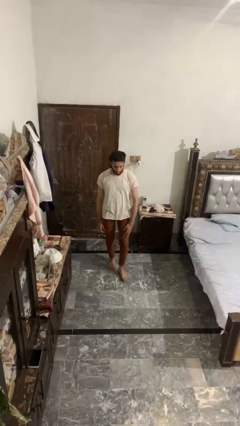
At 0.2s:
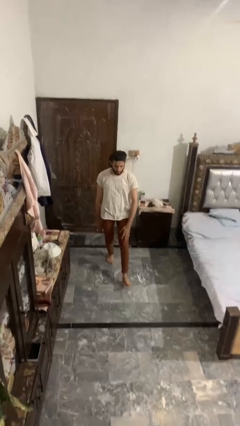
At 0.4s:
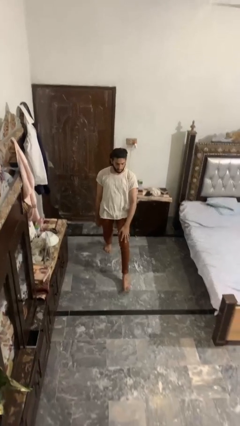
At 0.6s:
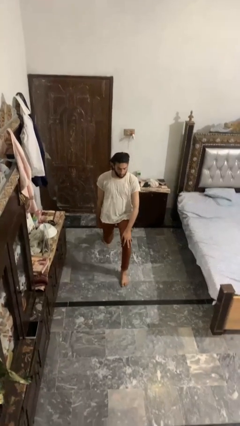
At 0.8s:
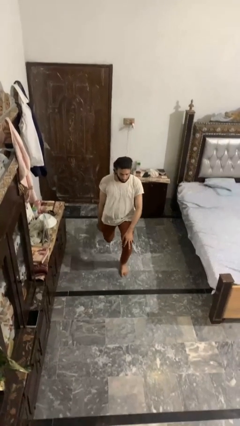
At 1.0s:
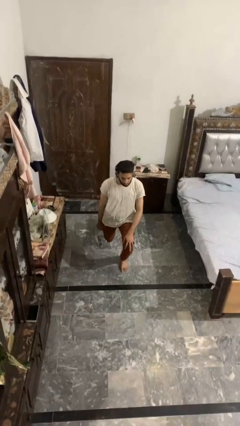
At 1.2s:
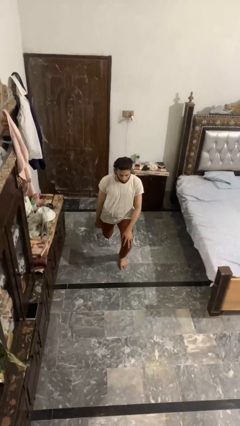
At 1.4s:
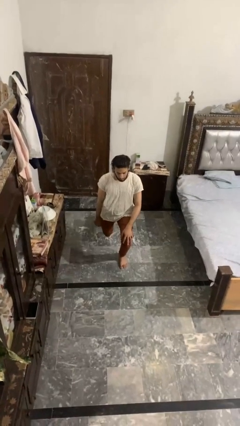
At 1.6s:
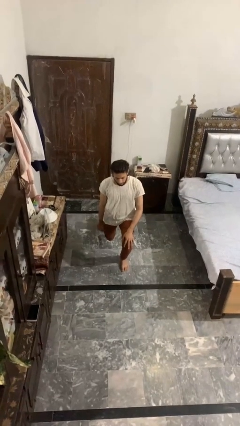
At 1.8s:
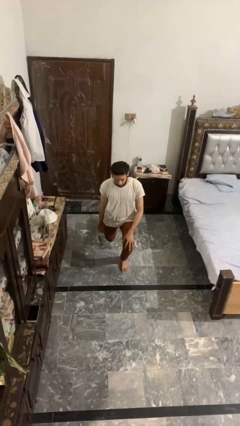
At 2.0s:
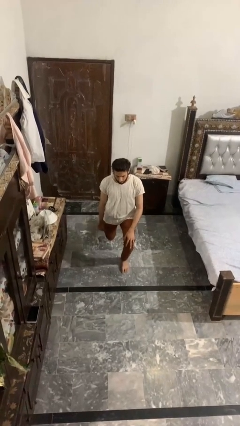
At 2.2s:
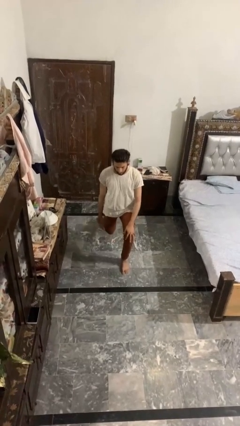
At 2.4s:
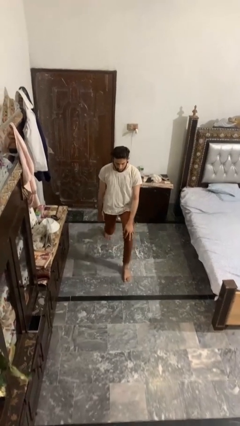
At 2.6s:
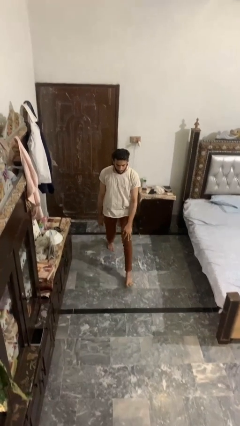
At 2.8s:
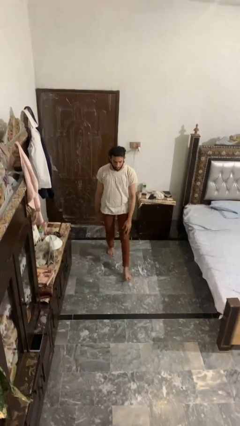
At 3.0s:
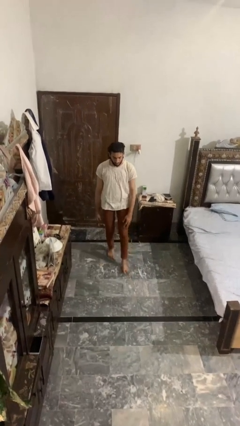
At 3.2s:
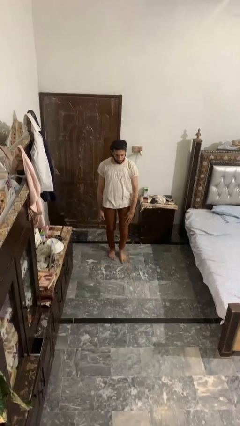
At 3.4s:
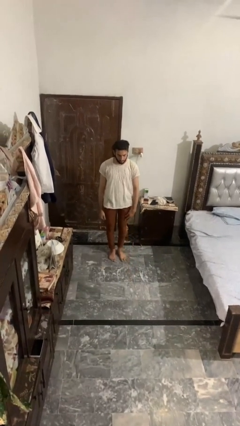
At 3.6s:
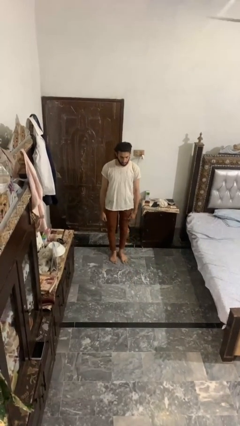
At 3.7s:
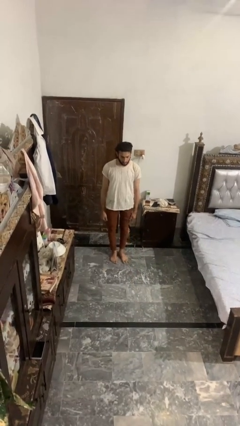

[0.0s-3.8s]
person exercises with lunges

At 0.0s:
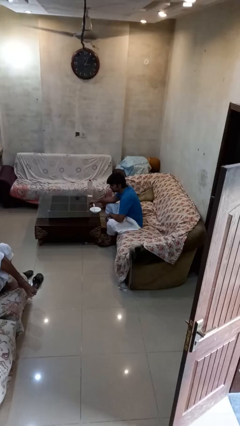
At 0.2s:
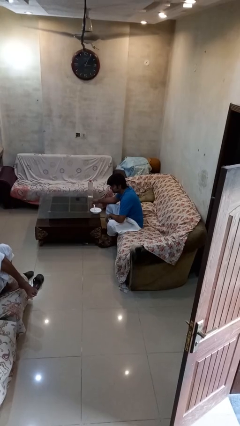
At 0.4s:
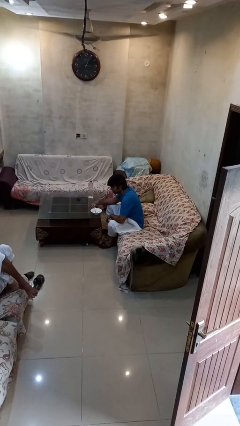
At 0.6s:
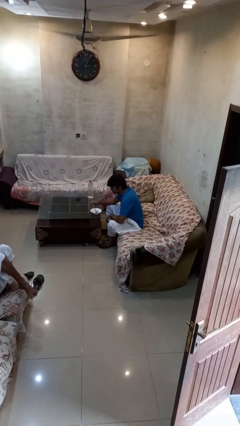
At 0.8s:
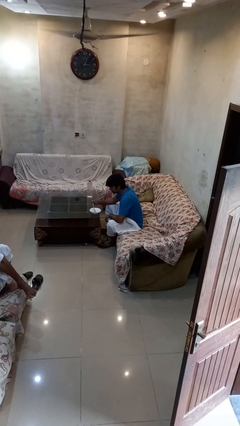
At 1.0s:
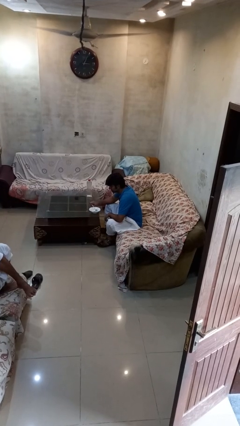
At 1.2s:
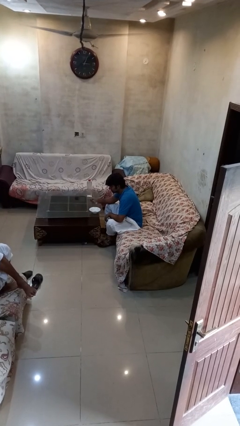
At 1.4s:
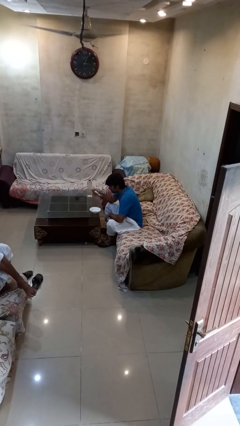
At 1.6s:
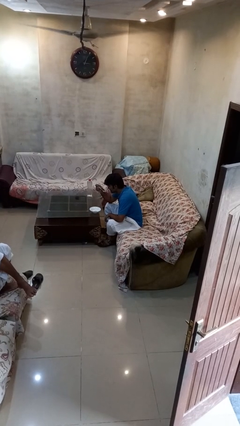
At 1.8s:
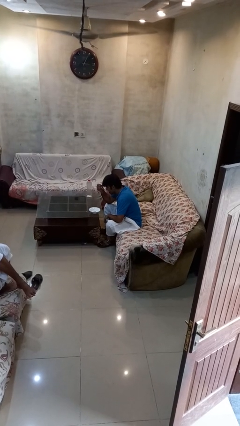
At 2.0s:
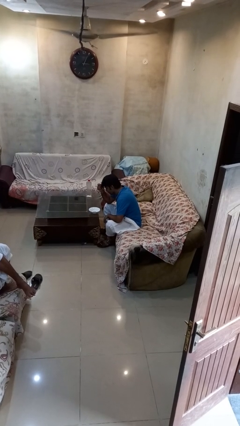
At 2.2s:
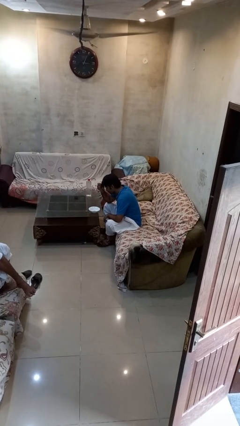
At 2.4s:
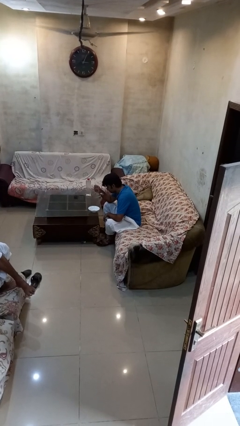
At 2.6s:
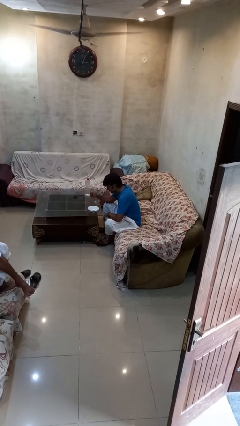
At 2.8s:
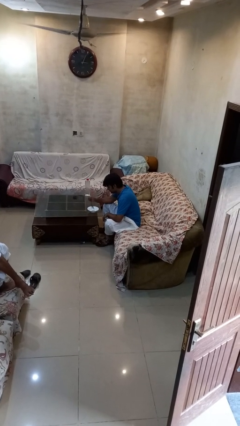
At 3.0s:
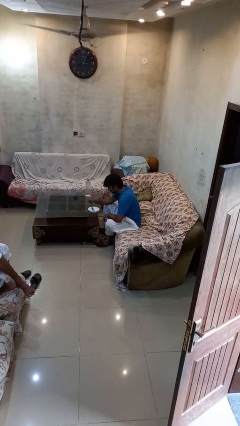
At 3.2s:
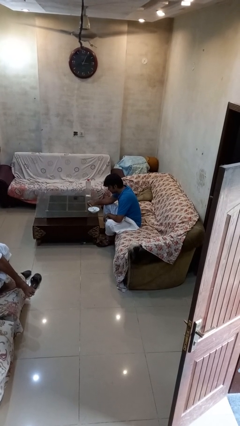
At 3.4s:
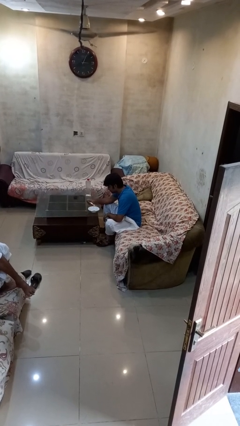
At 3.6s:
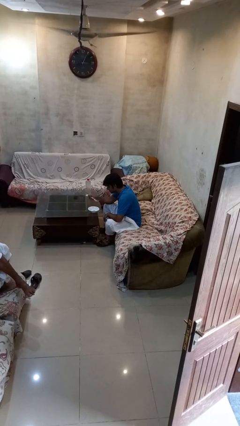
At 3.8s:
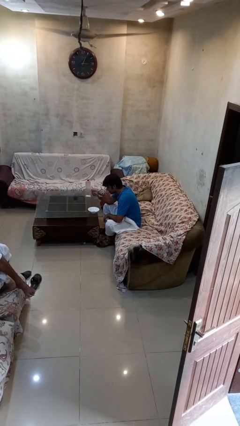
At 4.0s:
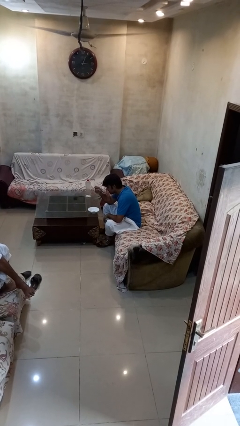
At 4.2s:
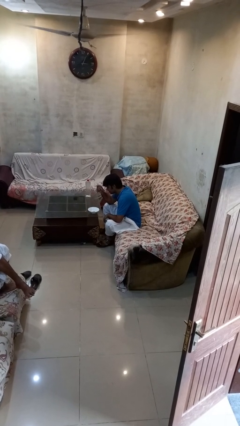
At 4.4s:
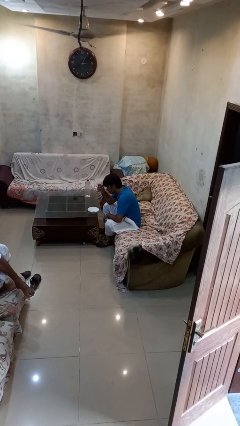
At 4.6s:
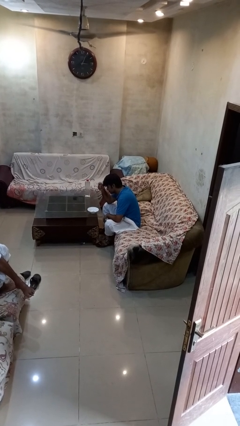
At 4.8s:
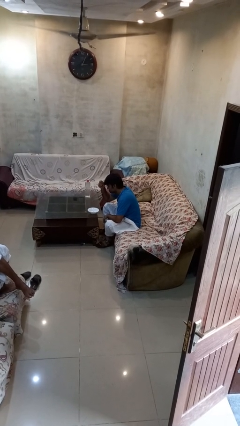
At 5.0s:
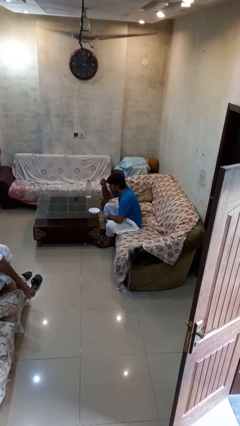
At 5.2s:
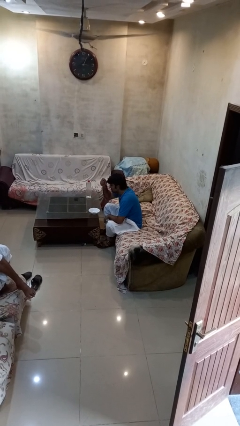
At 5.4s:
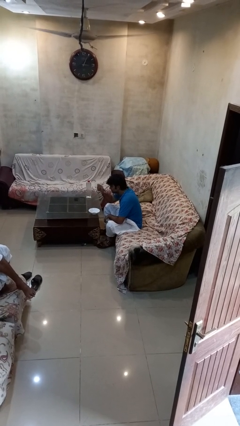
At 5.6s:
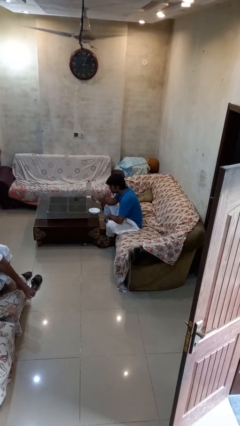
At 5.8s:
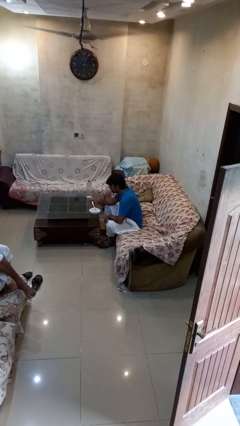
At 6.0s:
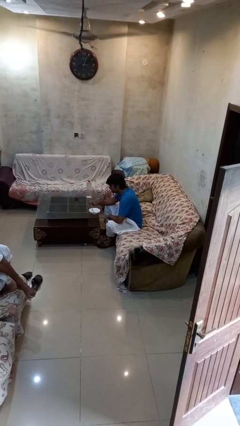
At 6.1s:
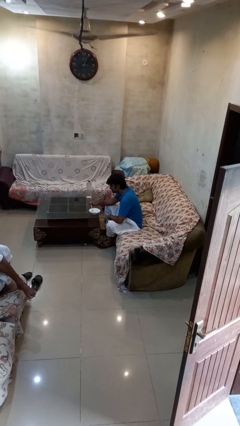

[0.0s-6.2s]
person eats with utensil

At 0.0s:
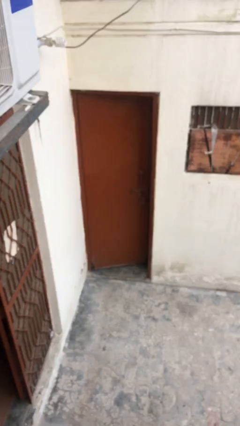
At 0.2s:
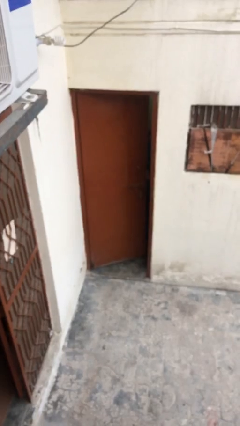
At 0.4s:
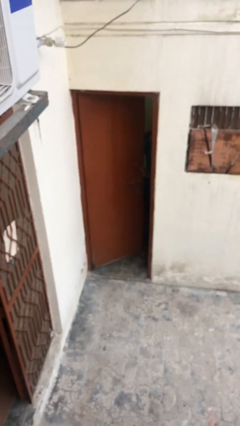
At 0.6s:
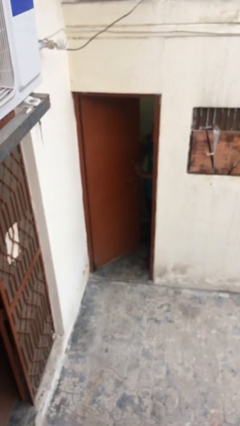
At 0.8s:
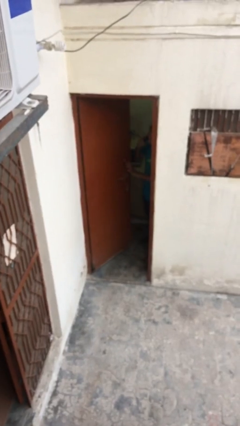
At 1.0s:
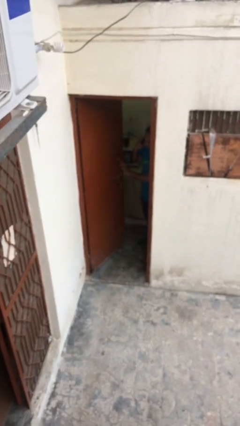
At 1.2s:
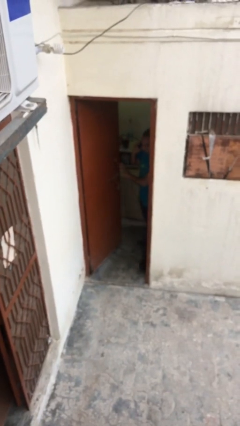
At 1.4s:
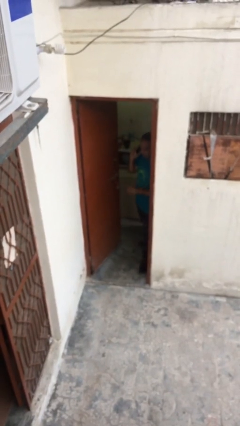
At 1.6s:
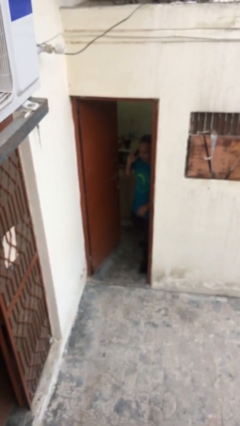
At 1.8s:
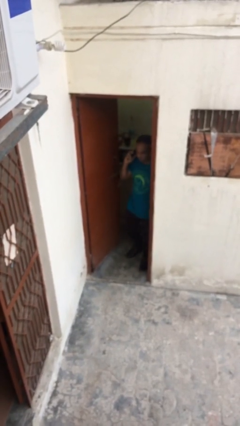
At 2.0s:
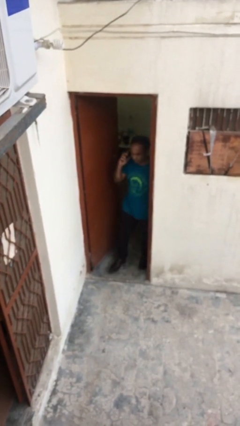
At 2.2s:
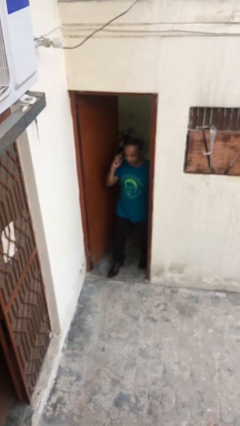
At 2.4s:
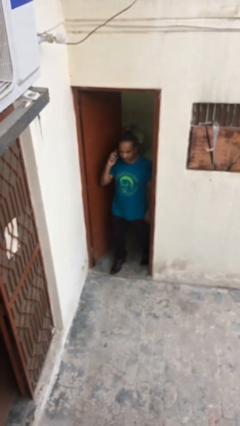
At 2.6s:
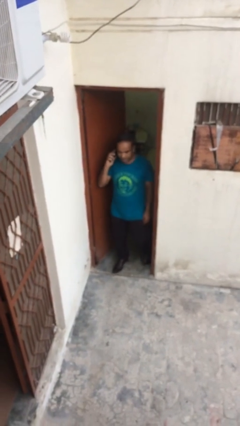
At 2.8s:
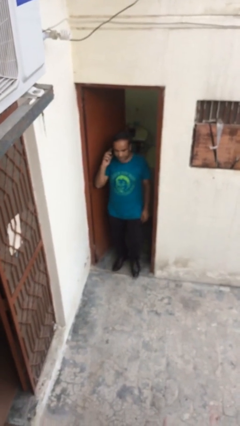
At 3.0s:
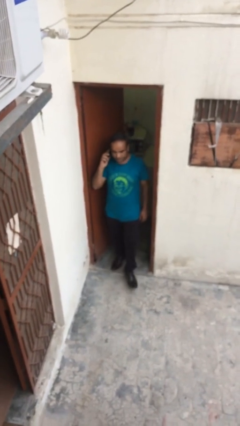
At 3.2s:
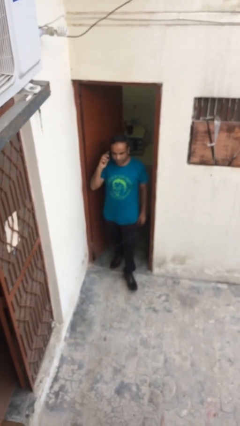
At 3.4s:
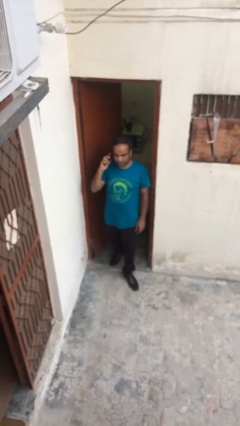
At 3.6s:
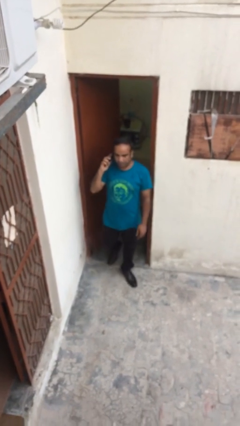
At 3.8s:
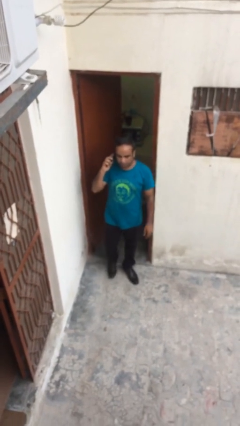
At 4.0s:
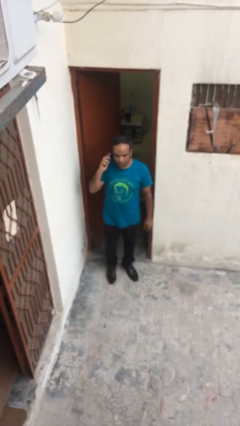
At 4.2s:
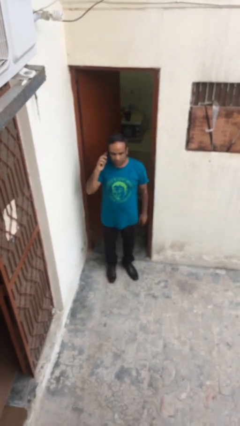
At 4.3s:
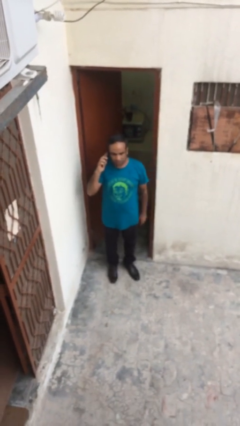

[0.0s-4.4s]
person enters scene through structure

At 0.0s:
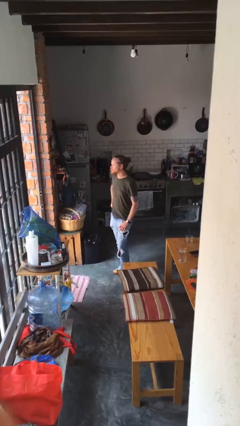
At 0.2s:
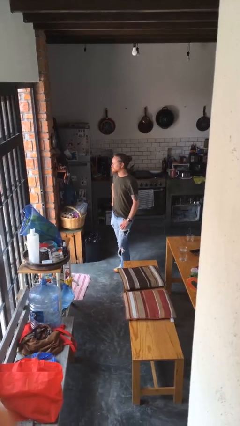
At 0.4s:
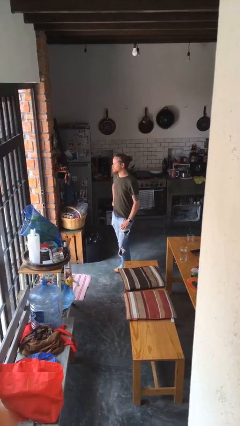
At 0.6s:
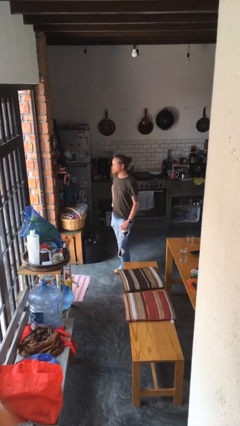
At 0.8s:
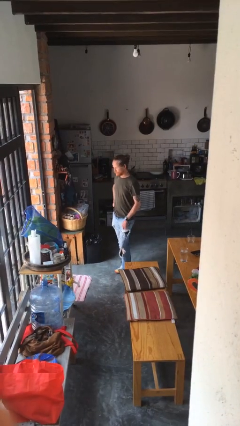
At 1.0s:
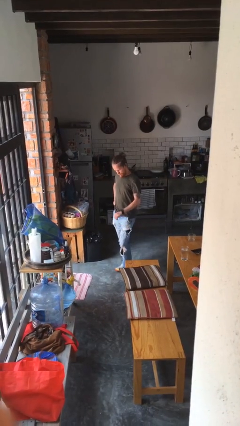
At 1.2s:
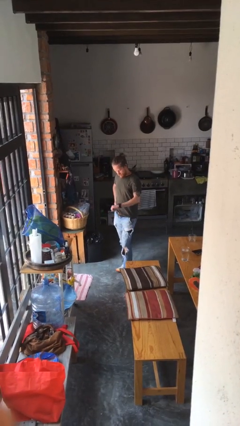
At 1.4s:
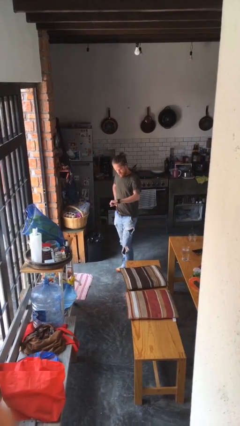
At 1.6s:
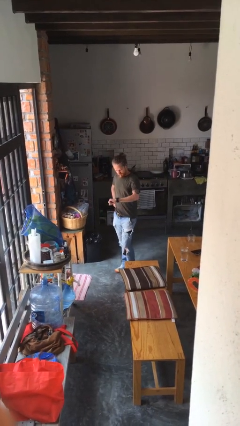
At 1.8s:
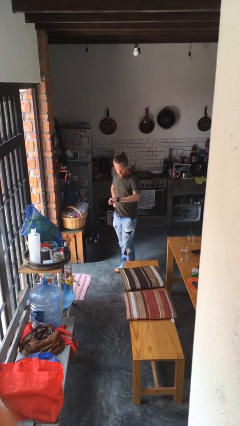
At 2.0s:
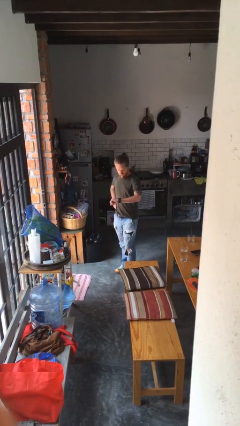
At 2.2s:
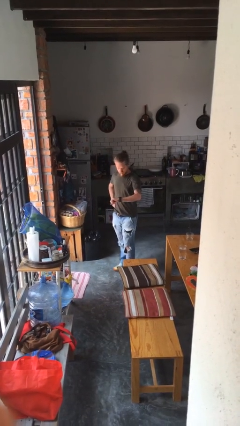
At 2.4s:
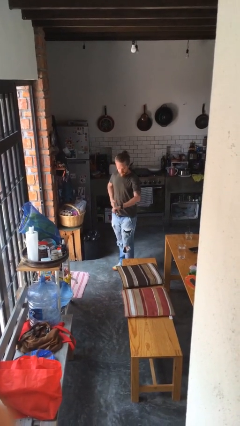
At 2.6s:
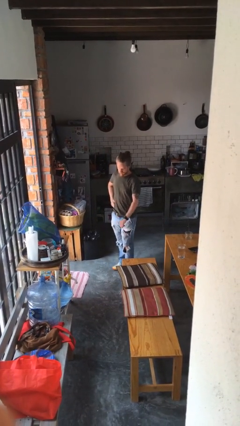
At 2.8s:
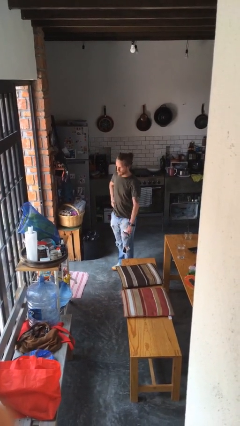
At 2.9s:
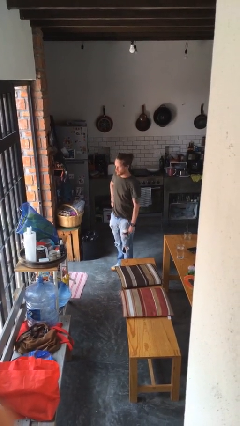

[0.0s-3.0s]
person looks at wristwatch

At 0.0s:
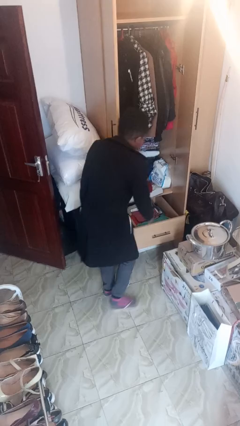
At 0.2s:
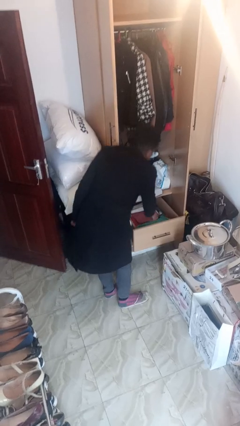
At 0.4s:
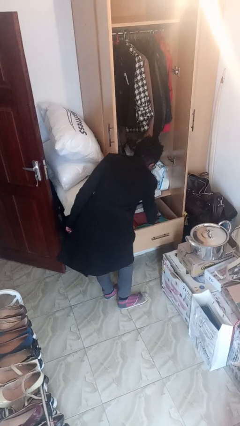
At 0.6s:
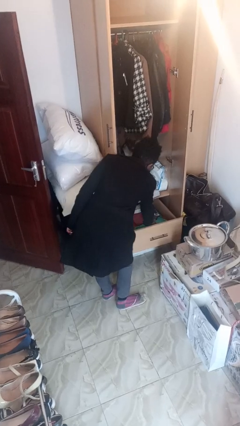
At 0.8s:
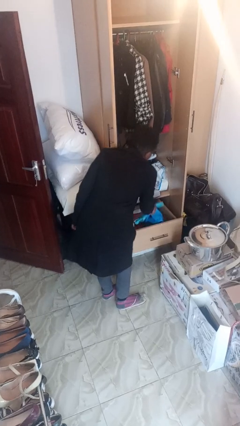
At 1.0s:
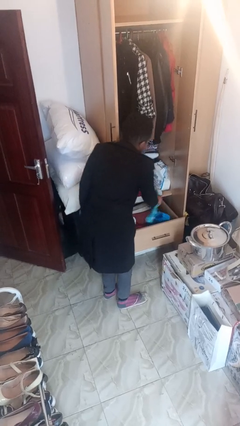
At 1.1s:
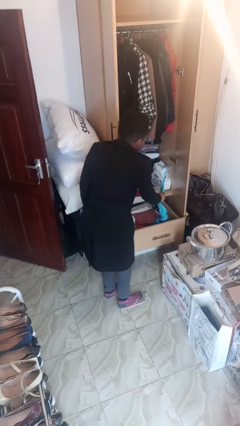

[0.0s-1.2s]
person takes clothes from dresser
